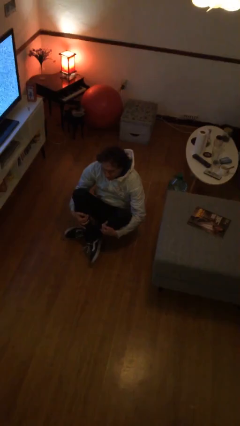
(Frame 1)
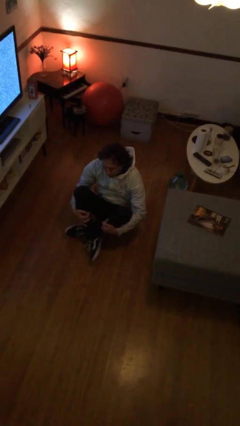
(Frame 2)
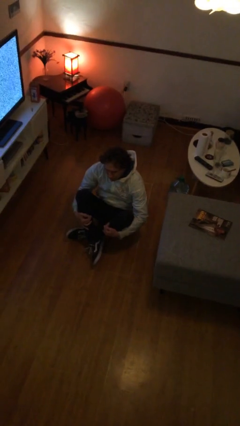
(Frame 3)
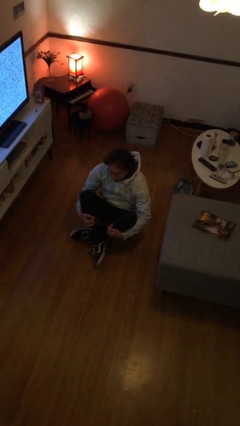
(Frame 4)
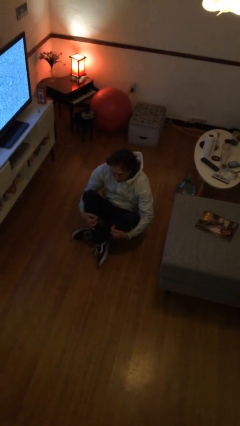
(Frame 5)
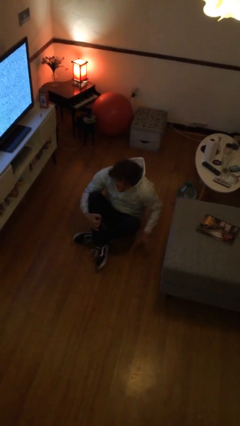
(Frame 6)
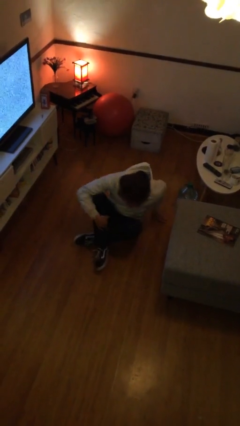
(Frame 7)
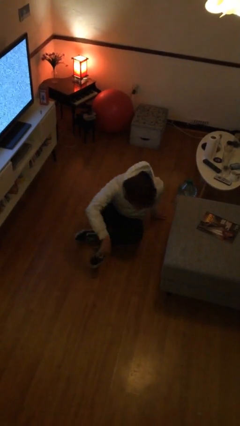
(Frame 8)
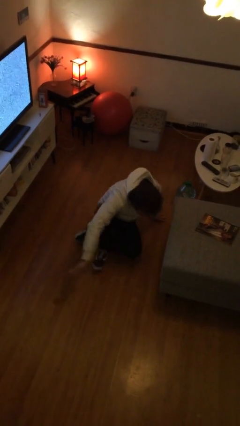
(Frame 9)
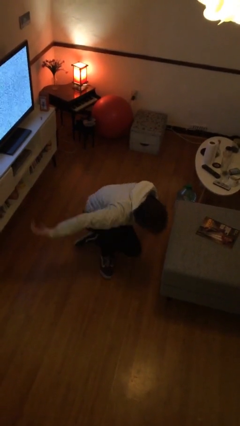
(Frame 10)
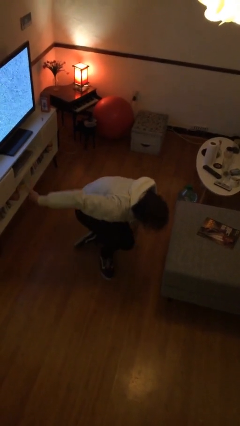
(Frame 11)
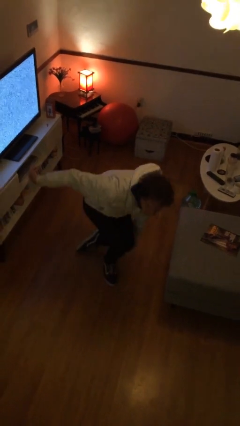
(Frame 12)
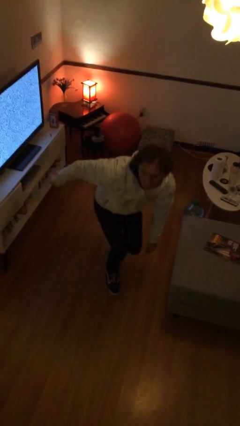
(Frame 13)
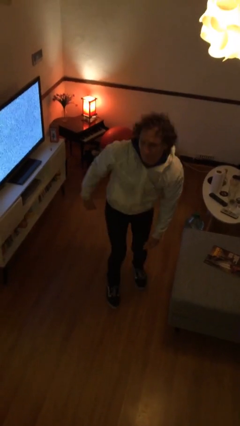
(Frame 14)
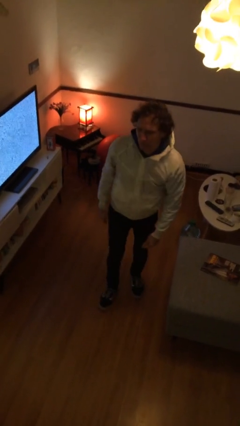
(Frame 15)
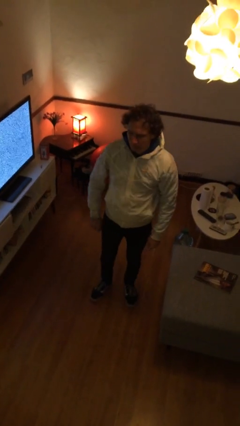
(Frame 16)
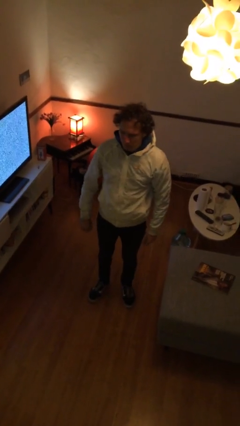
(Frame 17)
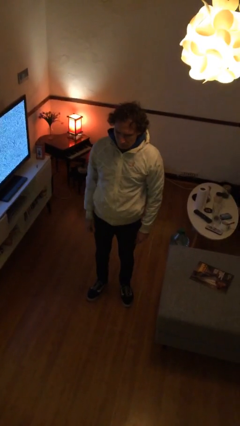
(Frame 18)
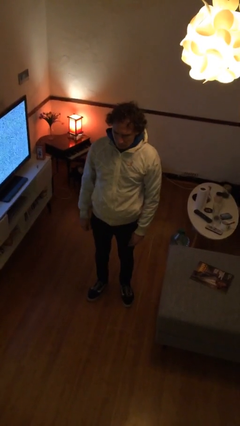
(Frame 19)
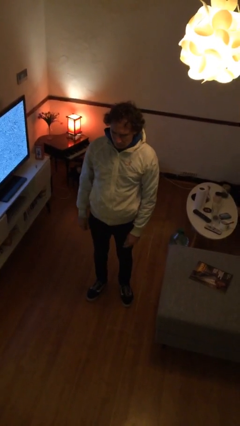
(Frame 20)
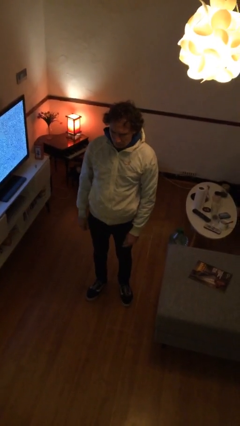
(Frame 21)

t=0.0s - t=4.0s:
person stands up from floor

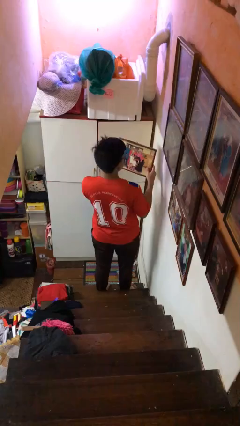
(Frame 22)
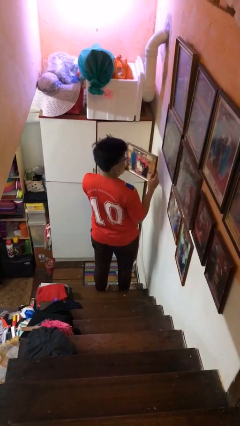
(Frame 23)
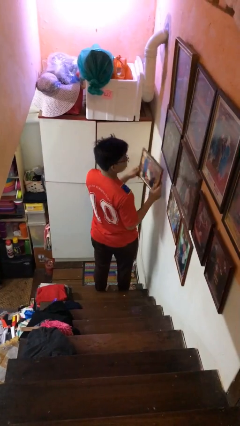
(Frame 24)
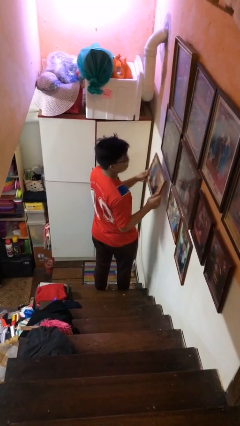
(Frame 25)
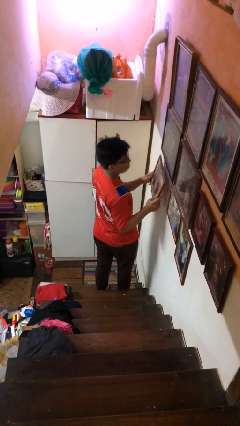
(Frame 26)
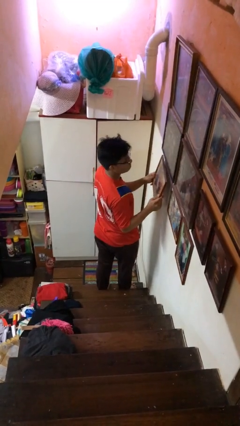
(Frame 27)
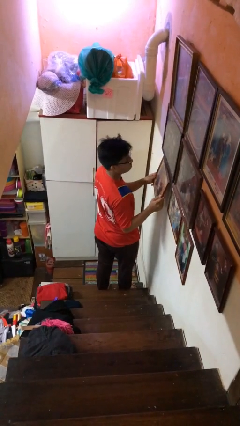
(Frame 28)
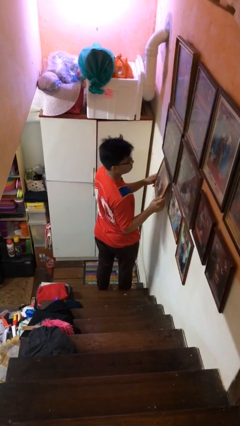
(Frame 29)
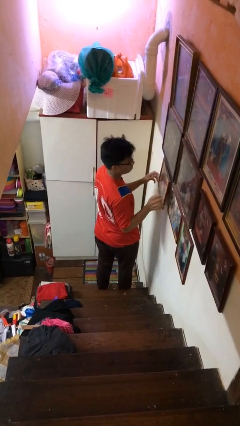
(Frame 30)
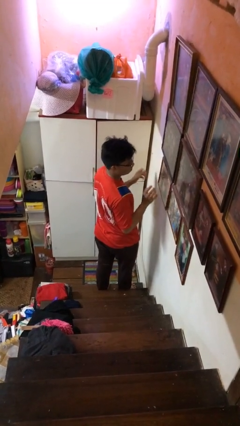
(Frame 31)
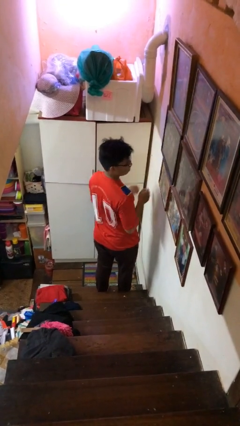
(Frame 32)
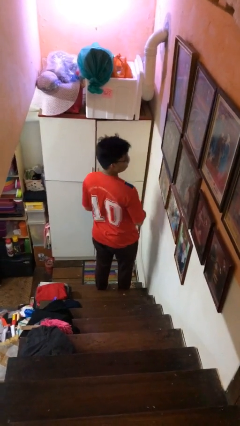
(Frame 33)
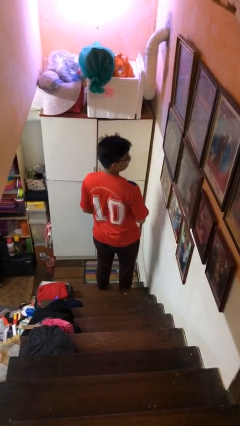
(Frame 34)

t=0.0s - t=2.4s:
person puts up picture frame

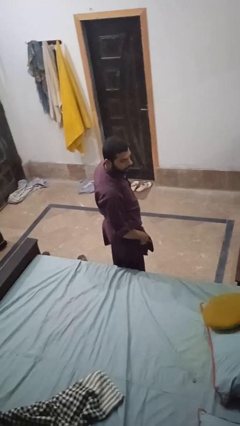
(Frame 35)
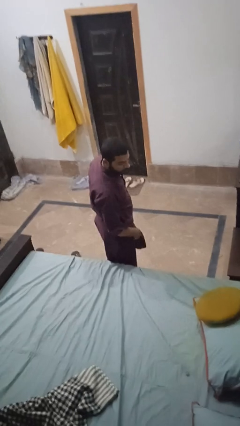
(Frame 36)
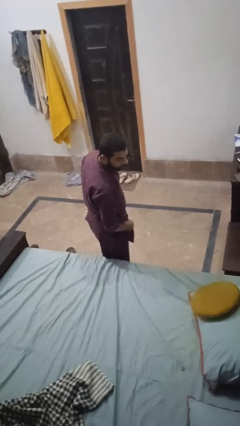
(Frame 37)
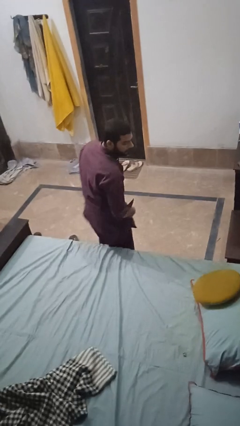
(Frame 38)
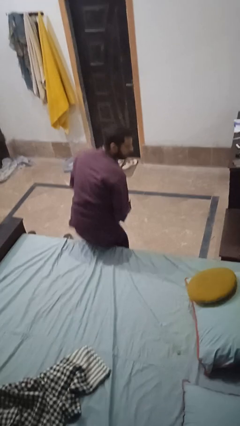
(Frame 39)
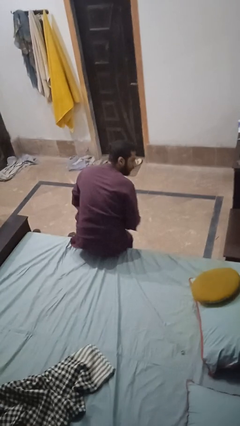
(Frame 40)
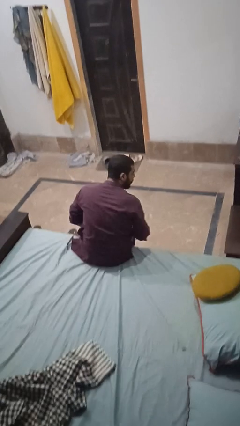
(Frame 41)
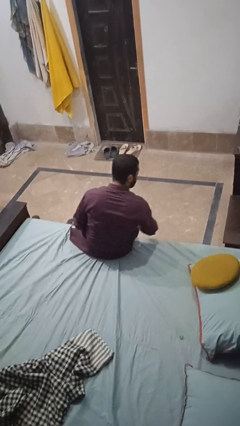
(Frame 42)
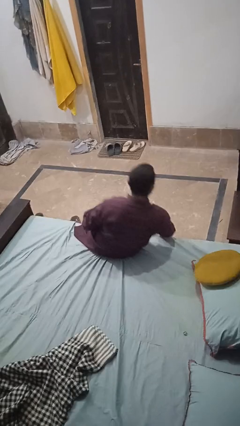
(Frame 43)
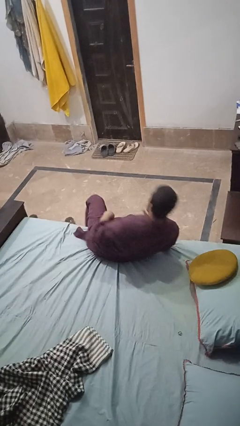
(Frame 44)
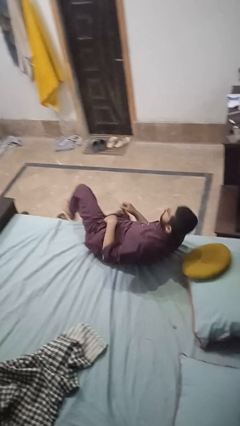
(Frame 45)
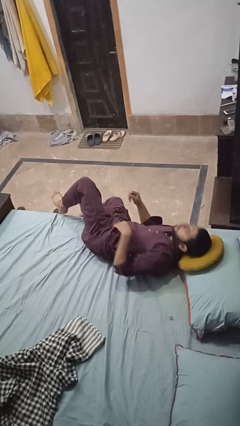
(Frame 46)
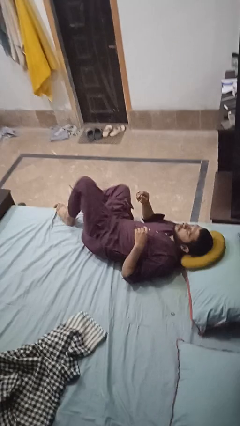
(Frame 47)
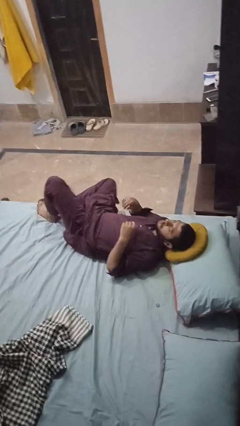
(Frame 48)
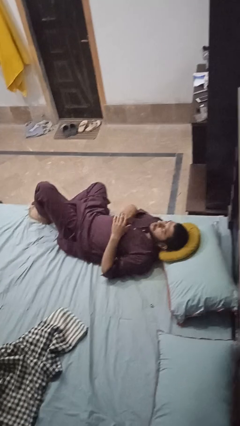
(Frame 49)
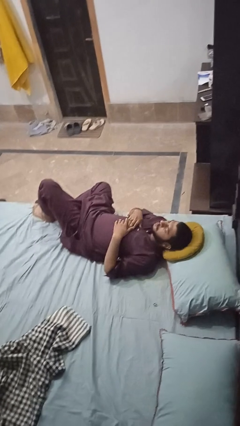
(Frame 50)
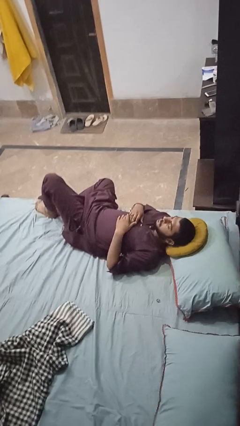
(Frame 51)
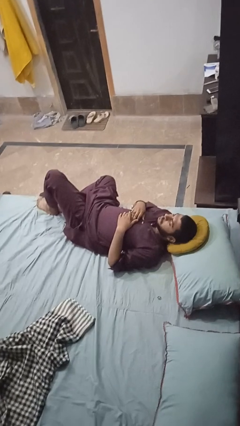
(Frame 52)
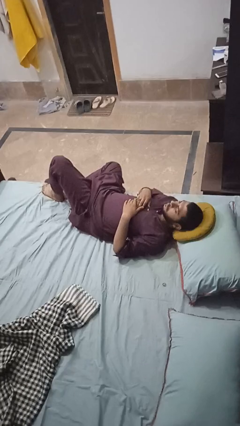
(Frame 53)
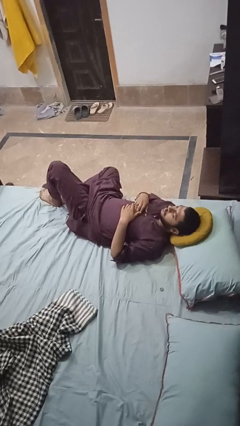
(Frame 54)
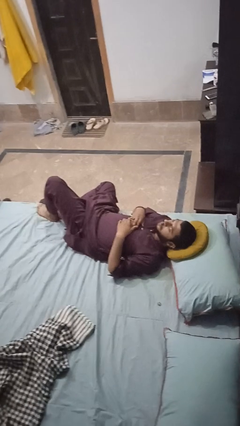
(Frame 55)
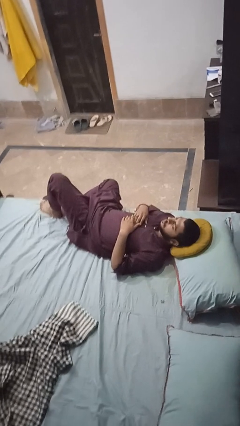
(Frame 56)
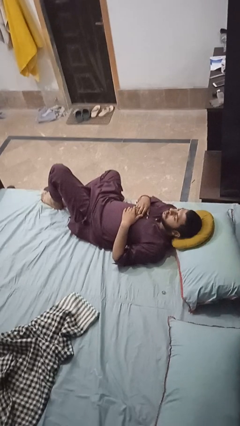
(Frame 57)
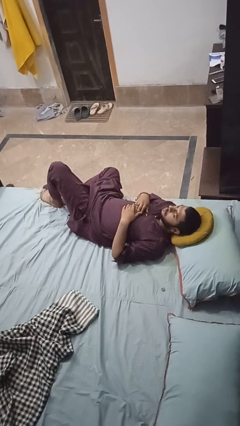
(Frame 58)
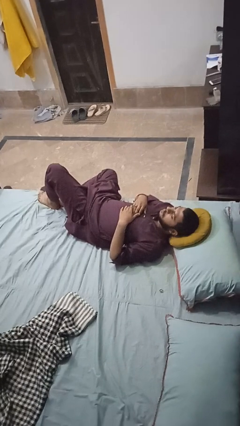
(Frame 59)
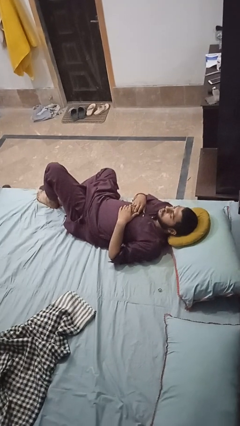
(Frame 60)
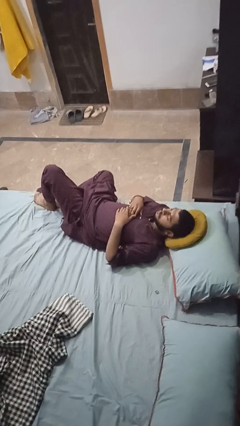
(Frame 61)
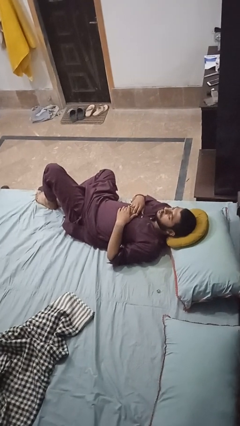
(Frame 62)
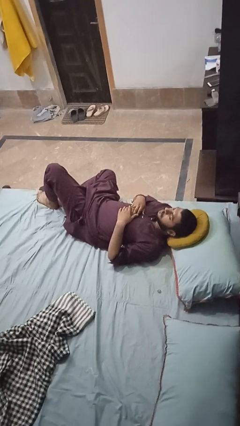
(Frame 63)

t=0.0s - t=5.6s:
person lies down on bed

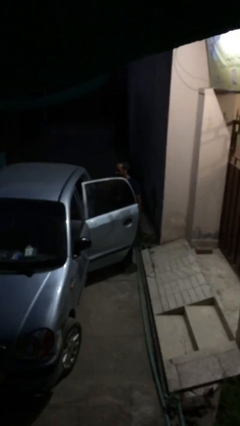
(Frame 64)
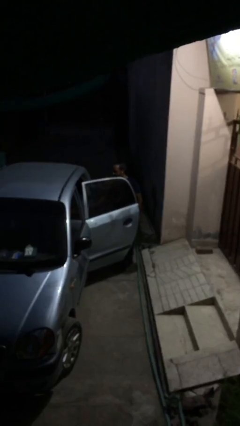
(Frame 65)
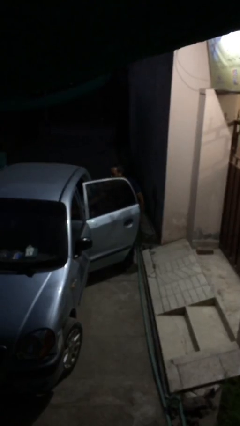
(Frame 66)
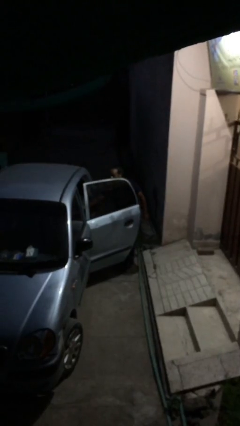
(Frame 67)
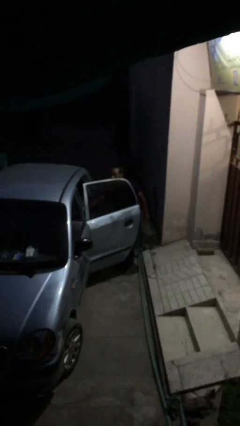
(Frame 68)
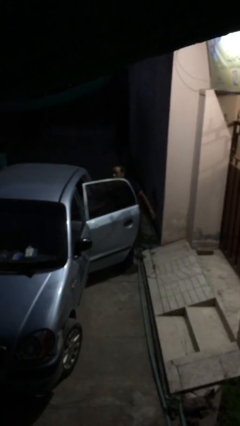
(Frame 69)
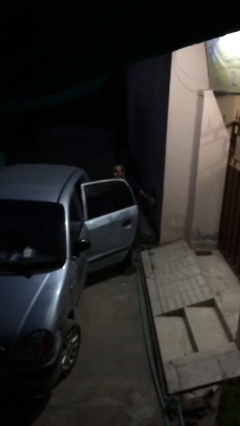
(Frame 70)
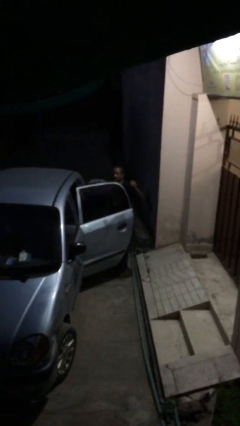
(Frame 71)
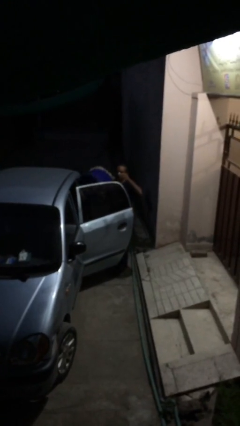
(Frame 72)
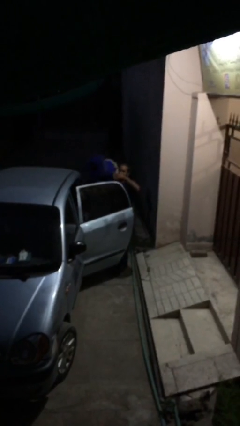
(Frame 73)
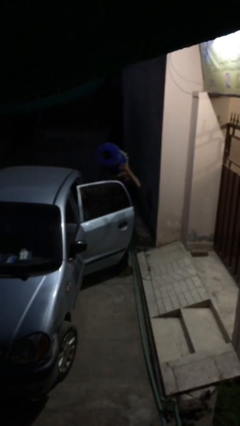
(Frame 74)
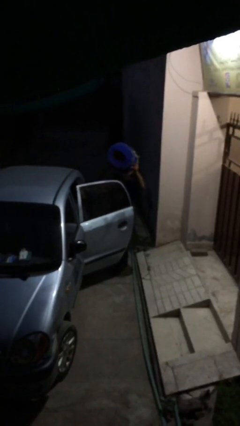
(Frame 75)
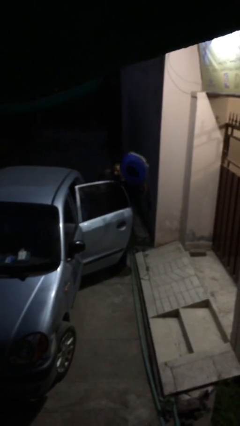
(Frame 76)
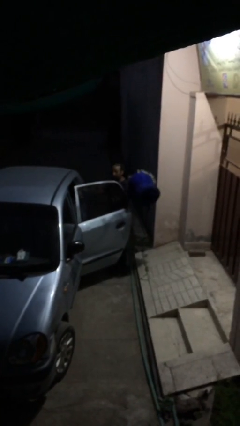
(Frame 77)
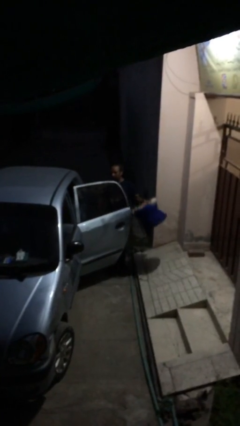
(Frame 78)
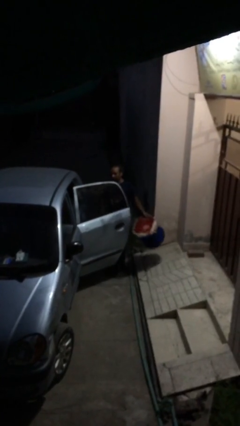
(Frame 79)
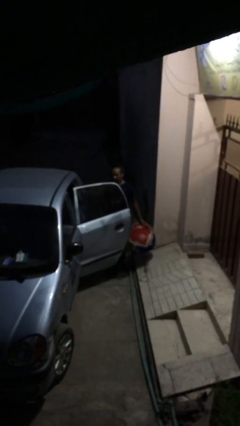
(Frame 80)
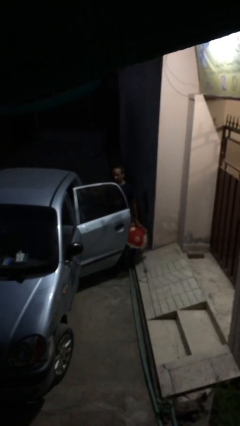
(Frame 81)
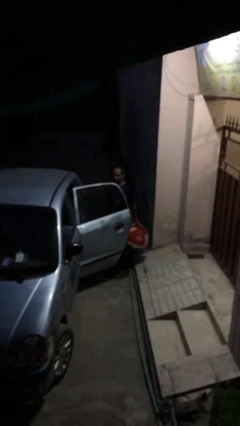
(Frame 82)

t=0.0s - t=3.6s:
person unloads car

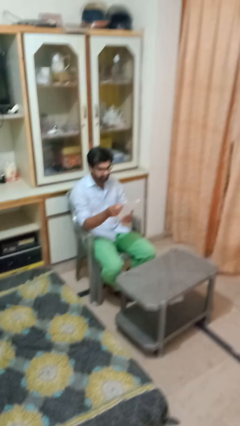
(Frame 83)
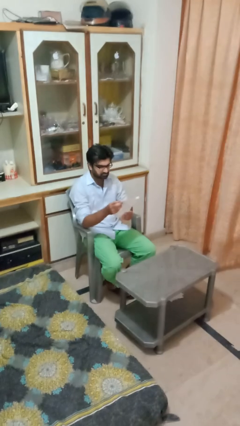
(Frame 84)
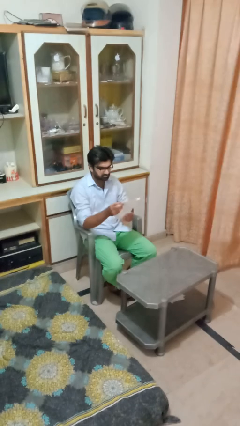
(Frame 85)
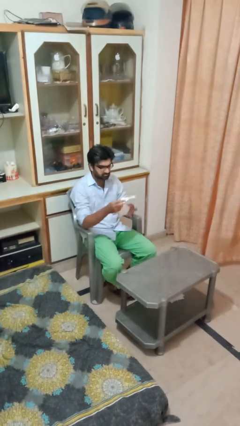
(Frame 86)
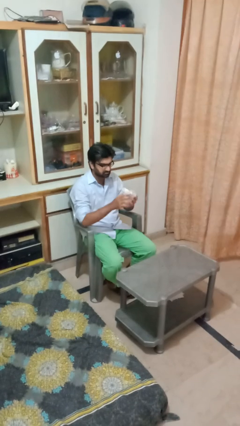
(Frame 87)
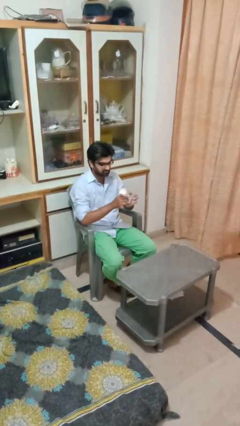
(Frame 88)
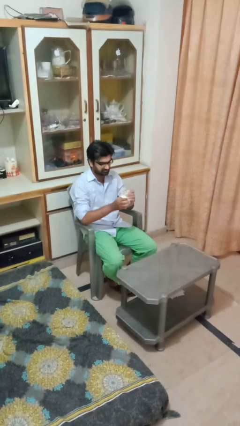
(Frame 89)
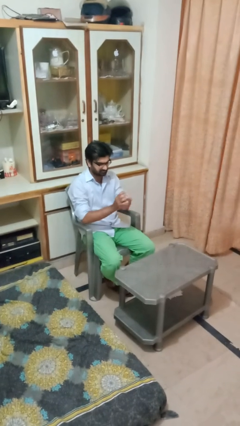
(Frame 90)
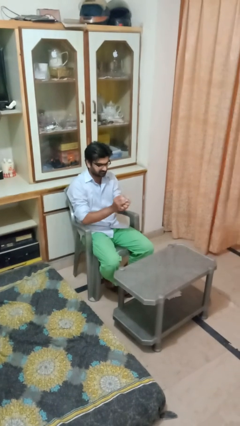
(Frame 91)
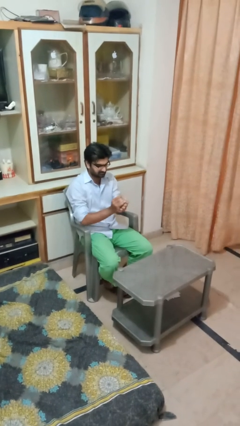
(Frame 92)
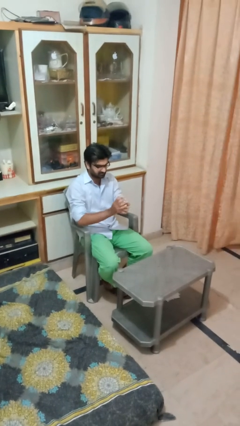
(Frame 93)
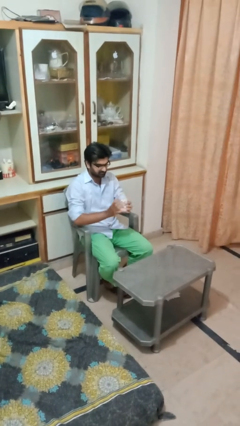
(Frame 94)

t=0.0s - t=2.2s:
person crumples paper
